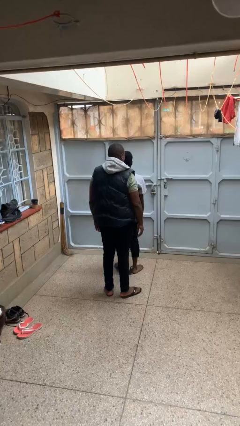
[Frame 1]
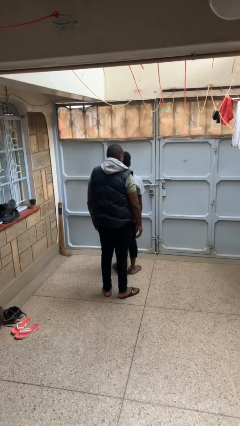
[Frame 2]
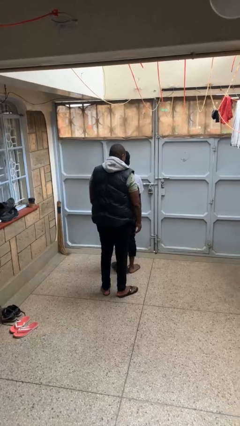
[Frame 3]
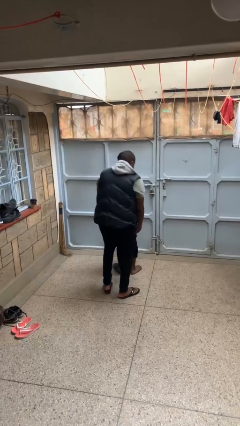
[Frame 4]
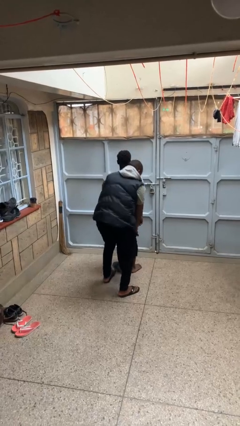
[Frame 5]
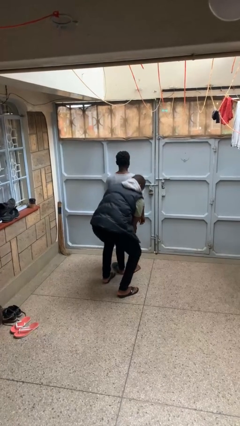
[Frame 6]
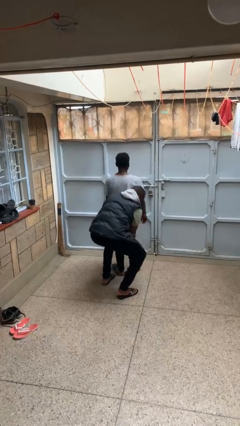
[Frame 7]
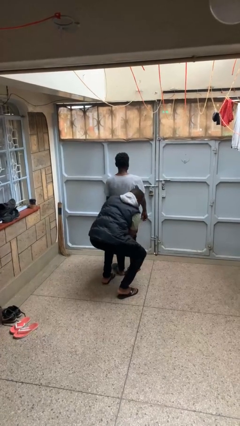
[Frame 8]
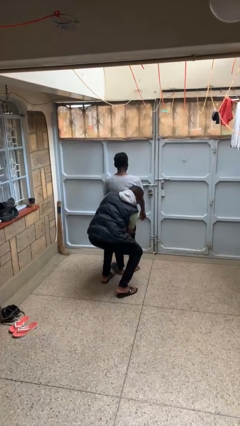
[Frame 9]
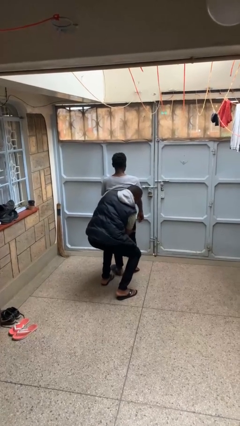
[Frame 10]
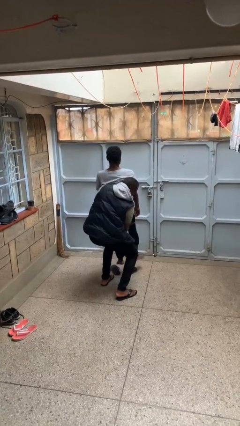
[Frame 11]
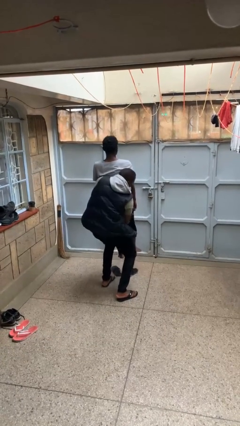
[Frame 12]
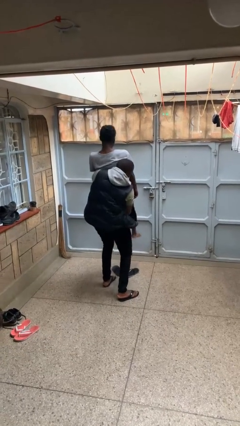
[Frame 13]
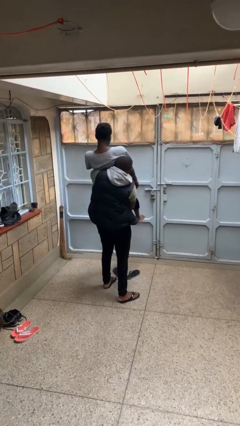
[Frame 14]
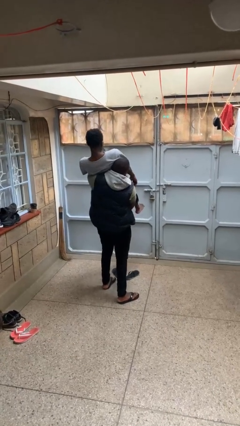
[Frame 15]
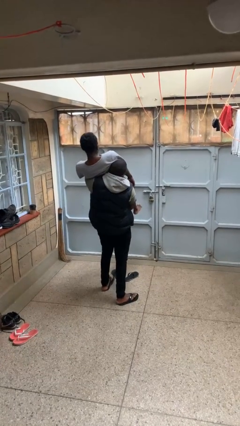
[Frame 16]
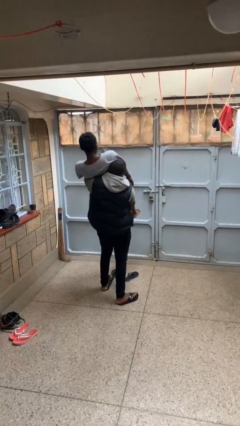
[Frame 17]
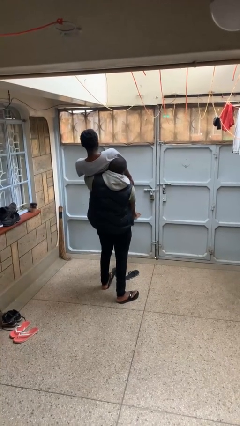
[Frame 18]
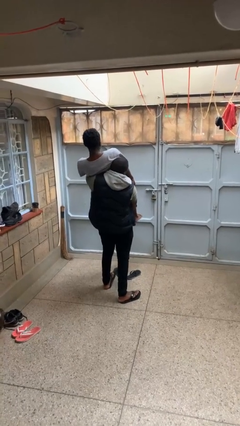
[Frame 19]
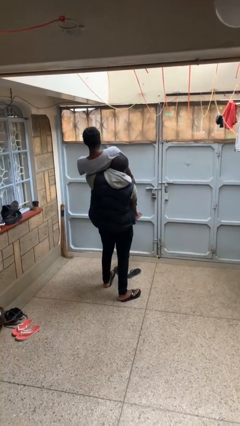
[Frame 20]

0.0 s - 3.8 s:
person carries person over shoulder

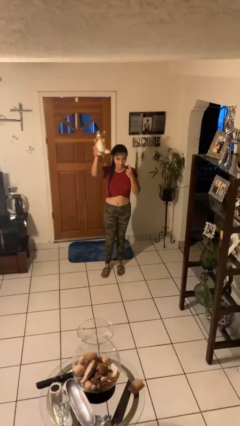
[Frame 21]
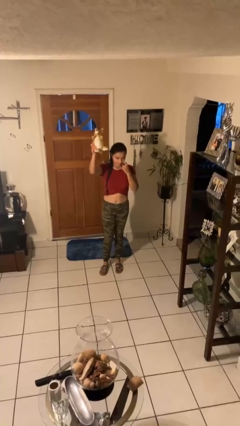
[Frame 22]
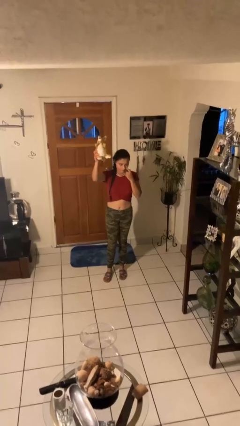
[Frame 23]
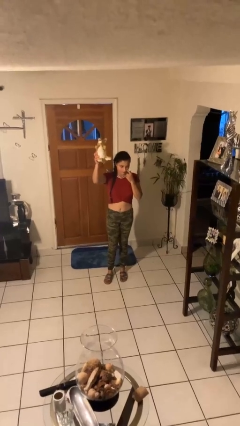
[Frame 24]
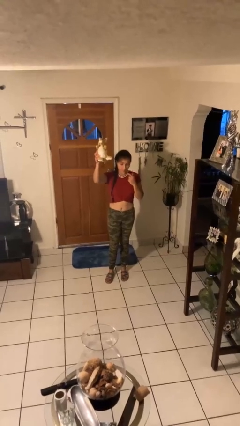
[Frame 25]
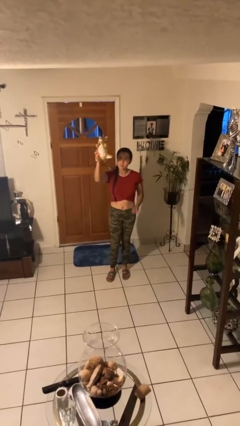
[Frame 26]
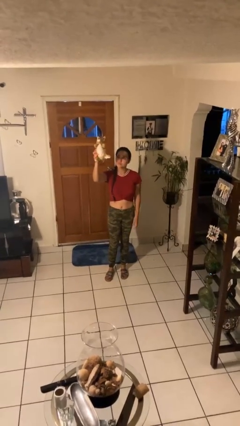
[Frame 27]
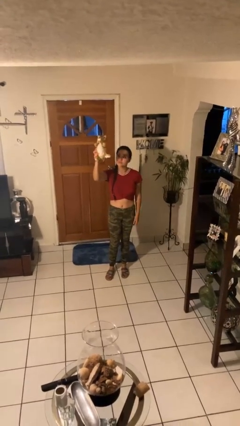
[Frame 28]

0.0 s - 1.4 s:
person holds object above head

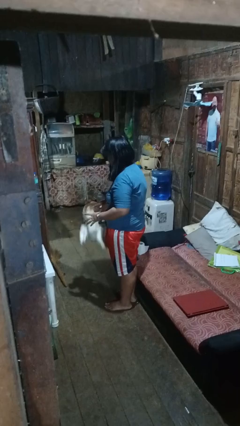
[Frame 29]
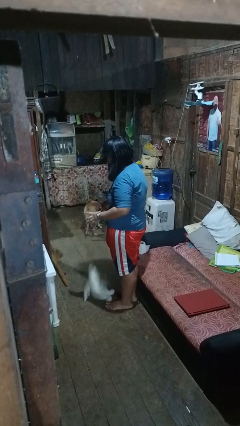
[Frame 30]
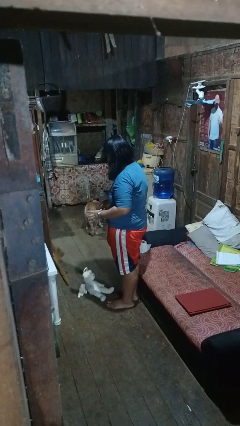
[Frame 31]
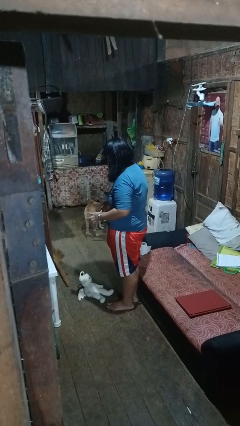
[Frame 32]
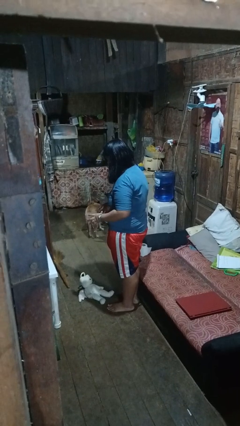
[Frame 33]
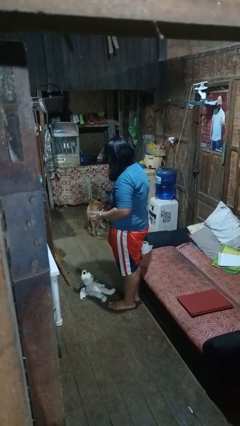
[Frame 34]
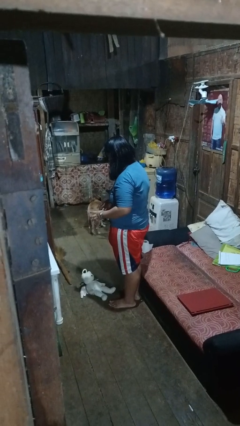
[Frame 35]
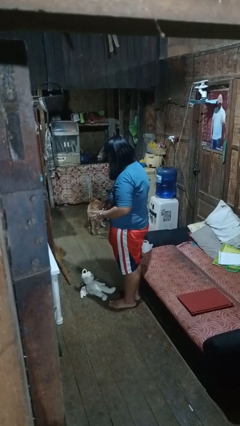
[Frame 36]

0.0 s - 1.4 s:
person drops object

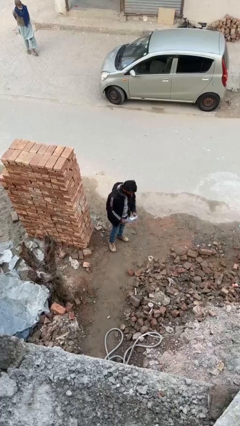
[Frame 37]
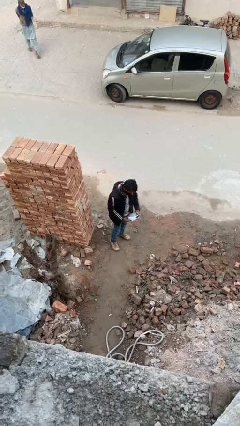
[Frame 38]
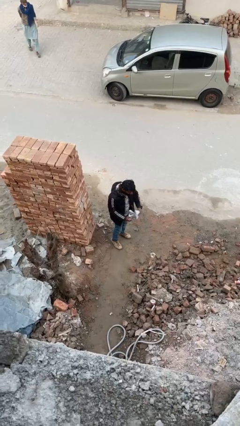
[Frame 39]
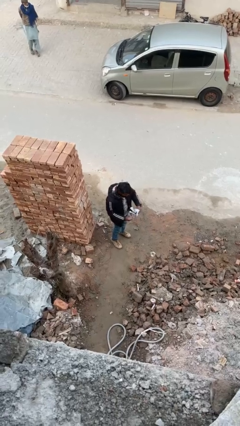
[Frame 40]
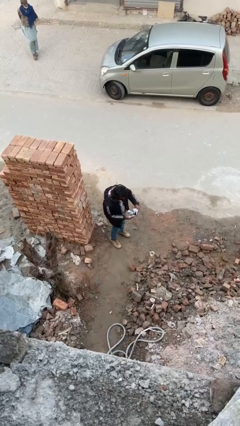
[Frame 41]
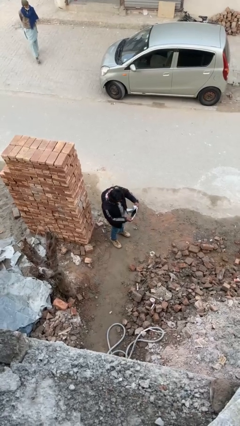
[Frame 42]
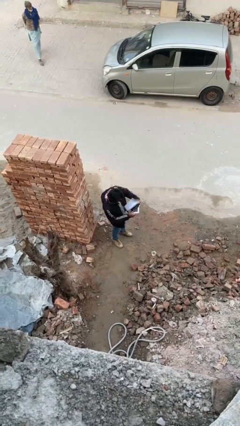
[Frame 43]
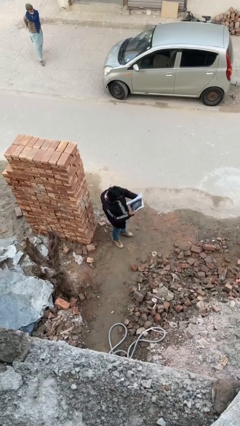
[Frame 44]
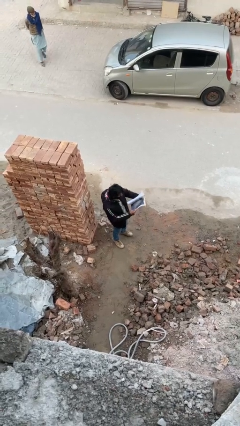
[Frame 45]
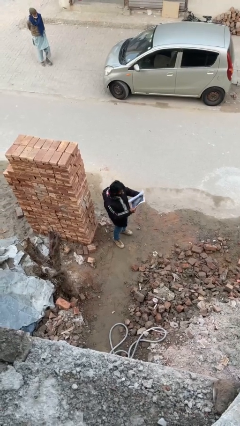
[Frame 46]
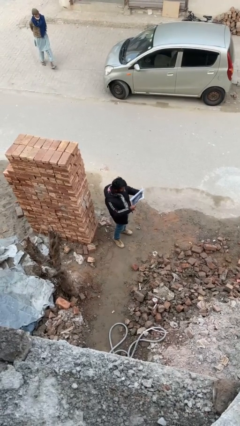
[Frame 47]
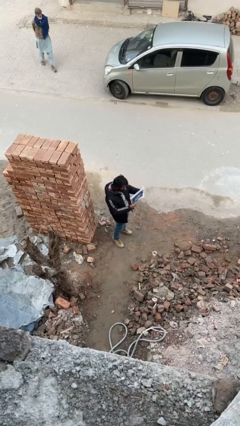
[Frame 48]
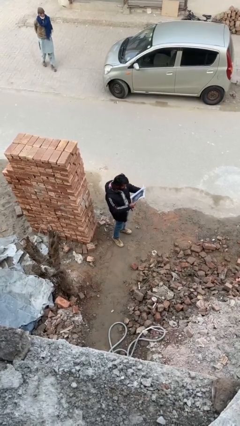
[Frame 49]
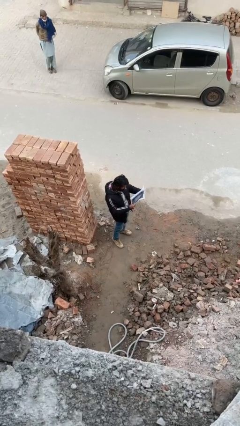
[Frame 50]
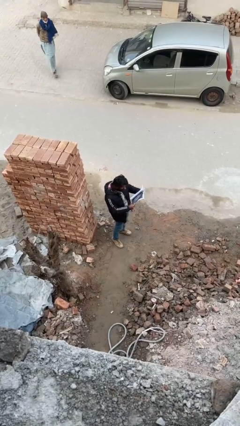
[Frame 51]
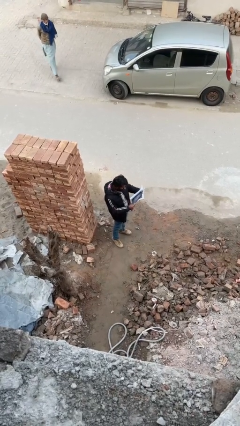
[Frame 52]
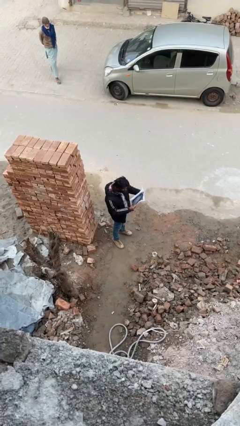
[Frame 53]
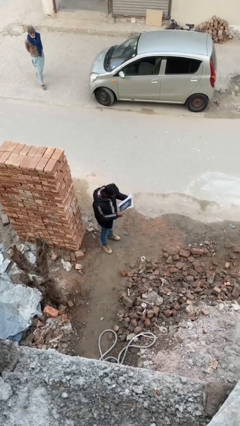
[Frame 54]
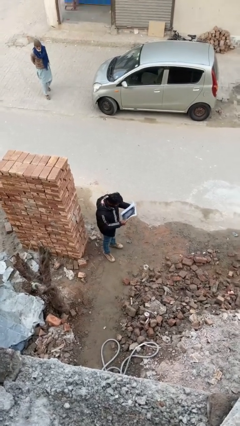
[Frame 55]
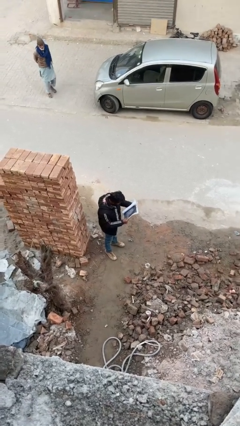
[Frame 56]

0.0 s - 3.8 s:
person reads document

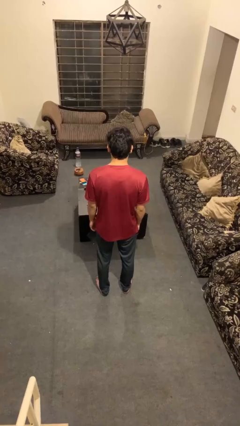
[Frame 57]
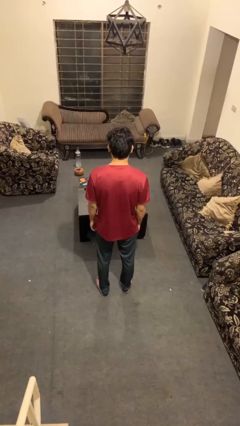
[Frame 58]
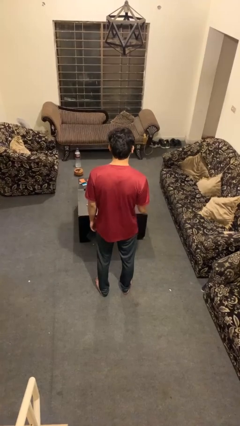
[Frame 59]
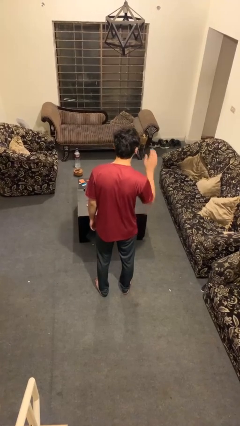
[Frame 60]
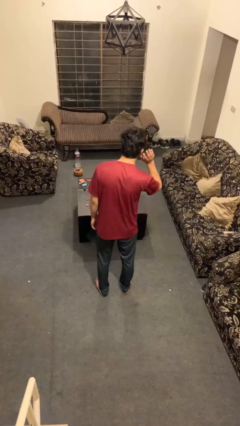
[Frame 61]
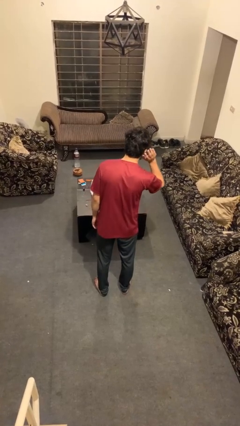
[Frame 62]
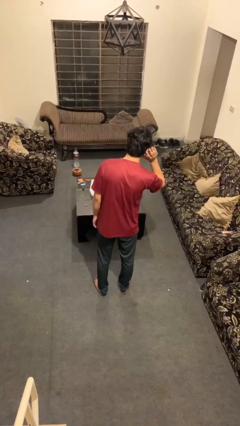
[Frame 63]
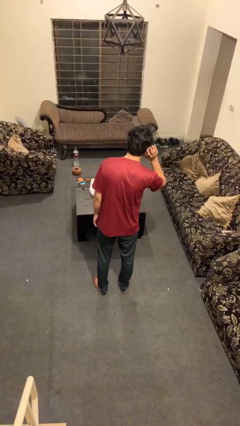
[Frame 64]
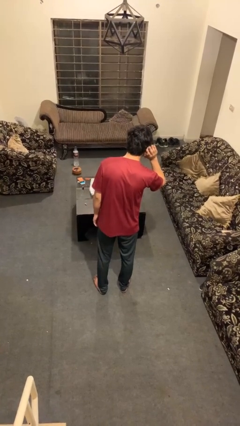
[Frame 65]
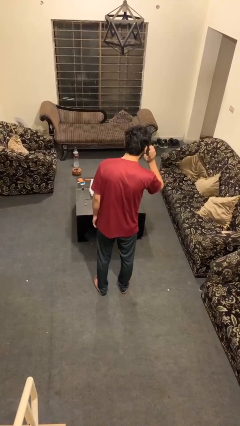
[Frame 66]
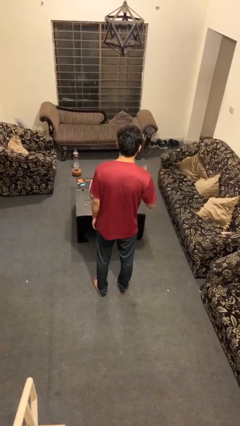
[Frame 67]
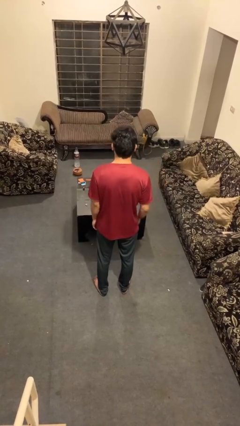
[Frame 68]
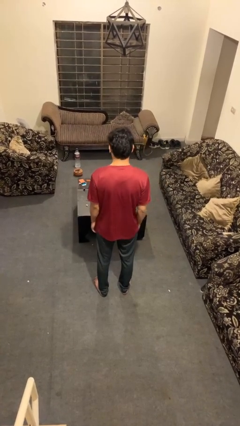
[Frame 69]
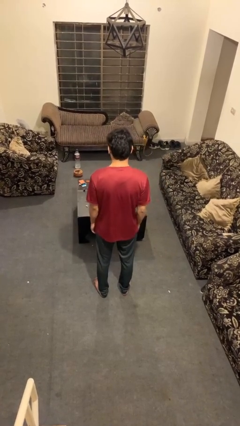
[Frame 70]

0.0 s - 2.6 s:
person gestures listen closely

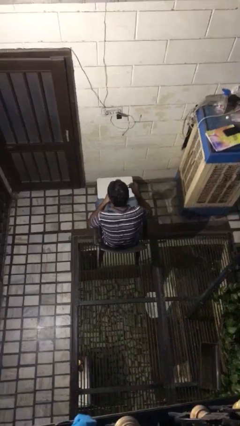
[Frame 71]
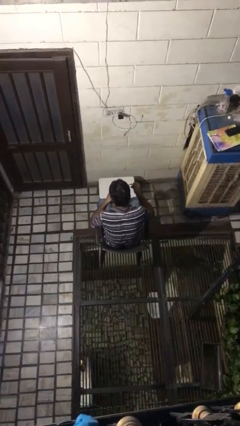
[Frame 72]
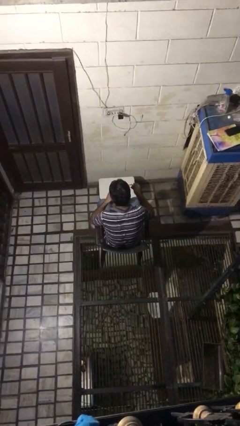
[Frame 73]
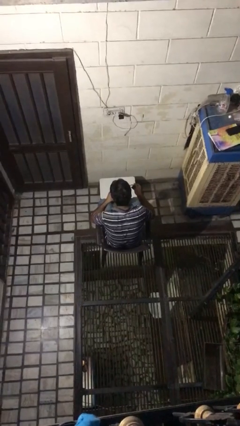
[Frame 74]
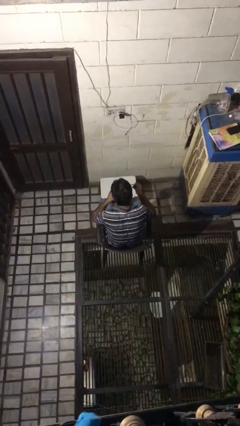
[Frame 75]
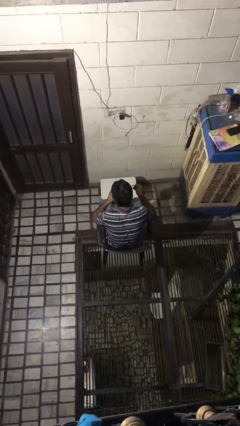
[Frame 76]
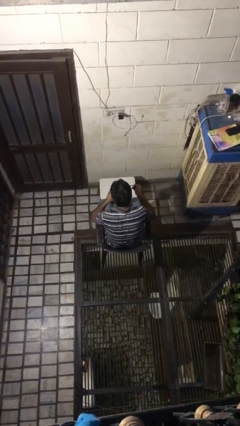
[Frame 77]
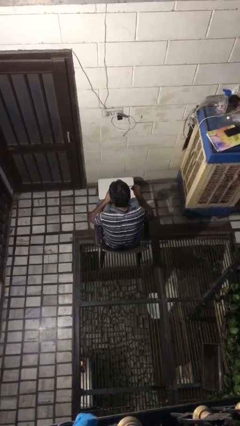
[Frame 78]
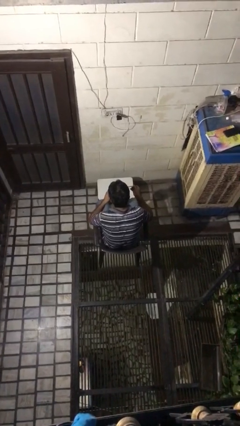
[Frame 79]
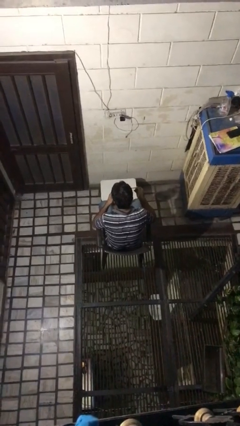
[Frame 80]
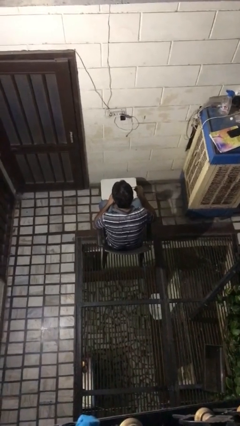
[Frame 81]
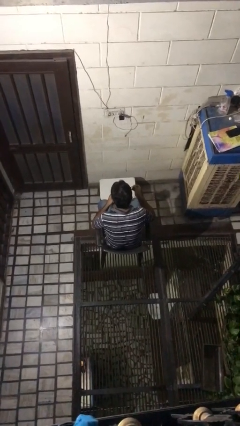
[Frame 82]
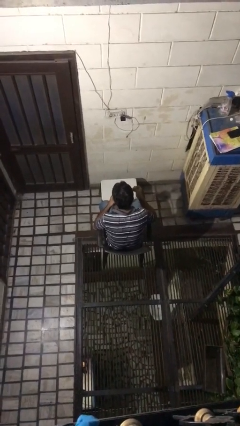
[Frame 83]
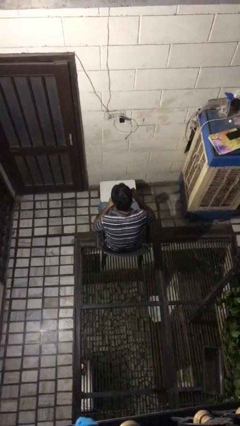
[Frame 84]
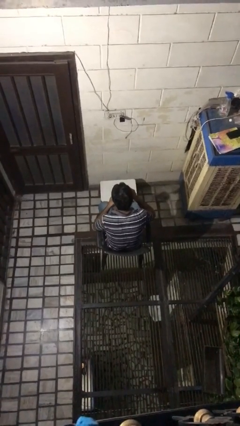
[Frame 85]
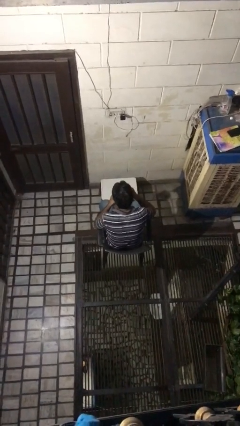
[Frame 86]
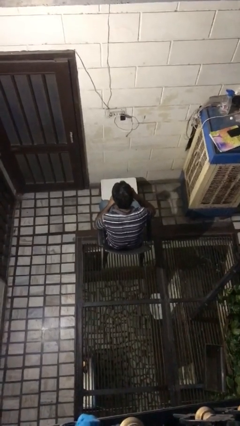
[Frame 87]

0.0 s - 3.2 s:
person drinks from mug

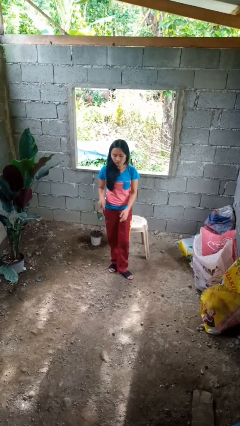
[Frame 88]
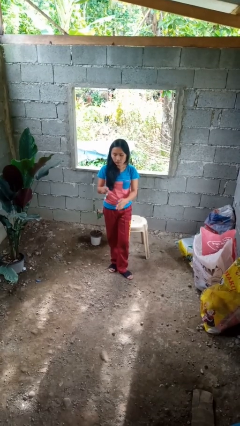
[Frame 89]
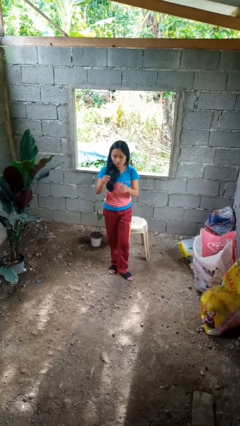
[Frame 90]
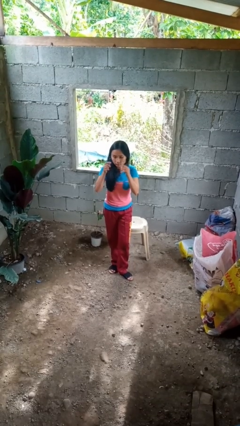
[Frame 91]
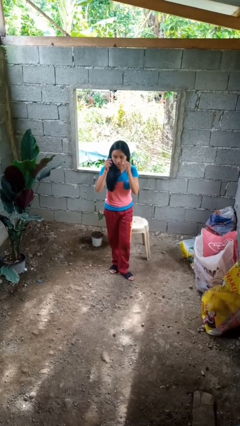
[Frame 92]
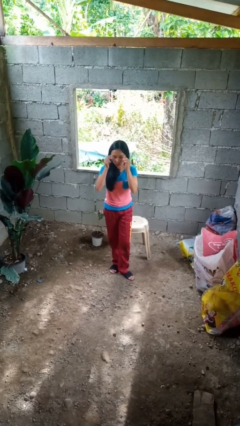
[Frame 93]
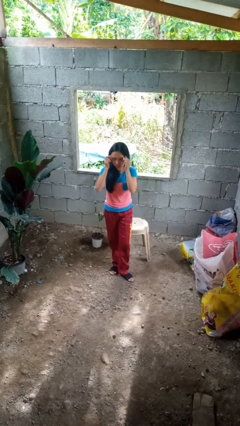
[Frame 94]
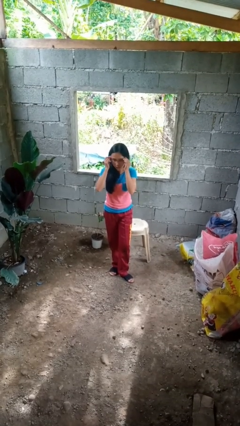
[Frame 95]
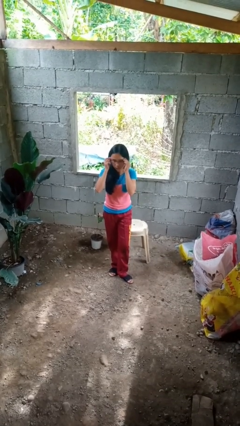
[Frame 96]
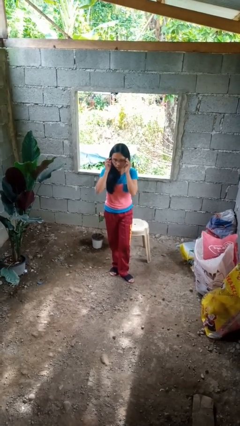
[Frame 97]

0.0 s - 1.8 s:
person puts on glasses
